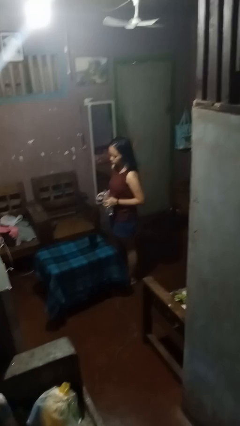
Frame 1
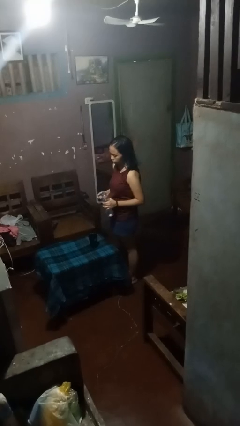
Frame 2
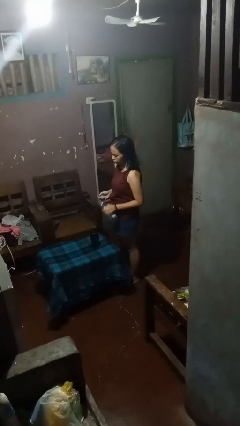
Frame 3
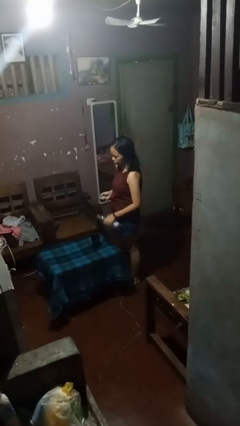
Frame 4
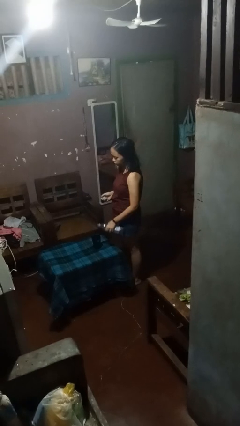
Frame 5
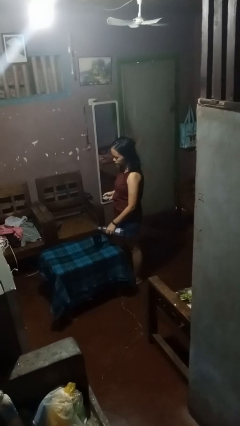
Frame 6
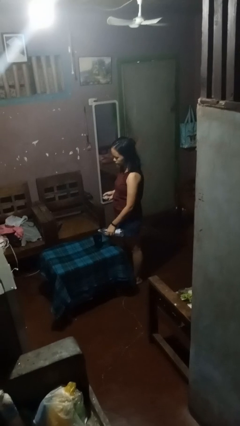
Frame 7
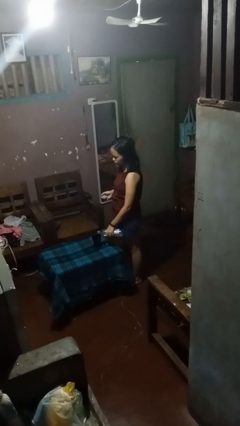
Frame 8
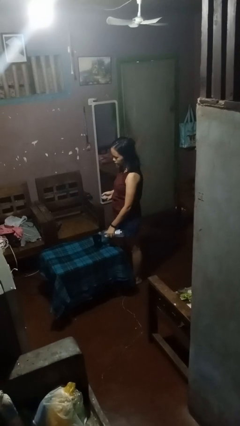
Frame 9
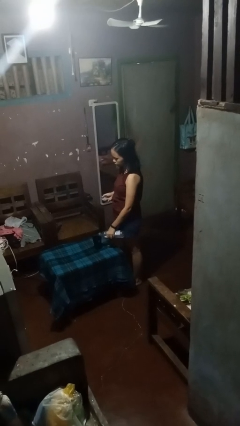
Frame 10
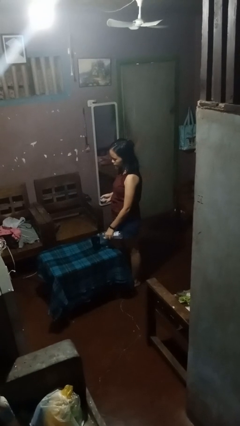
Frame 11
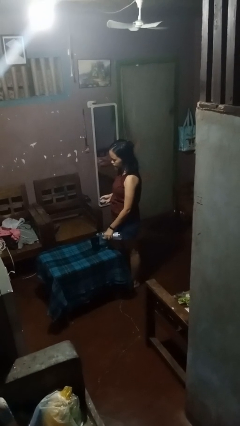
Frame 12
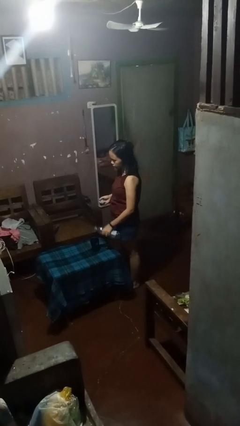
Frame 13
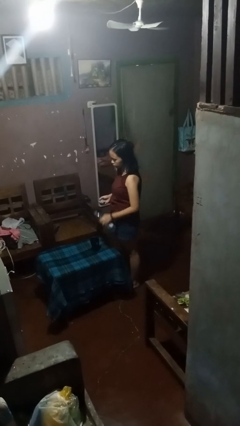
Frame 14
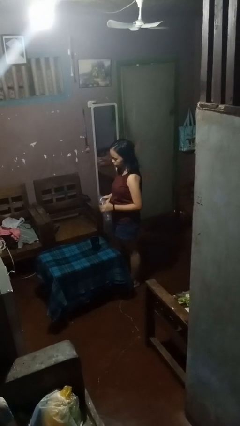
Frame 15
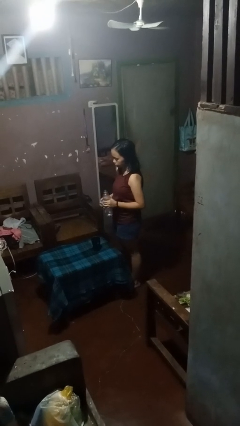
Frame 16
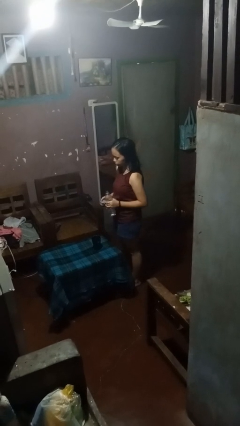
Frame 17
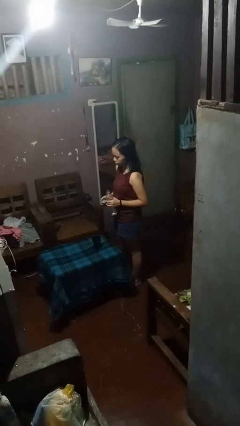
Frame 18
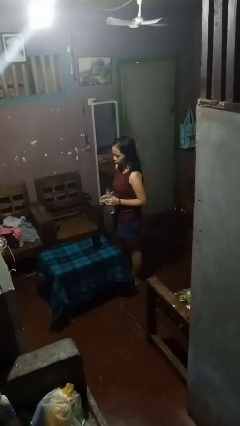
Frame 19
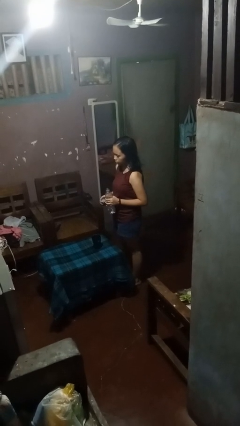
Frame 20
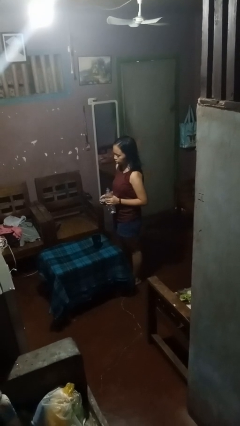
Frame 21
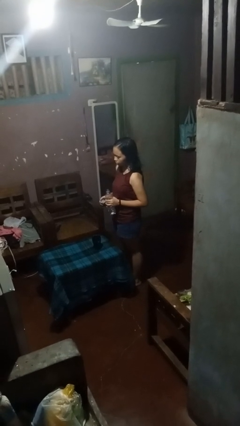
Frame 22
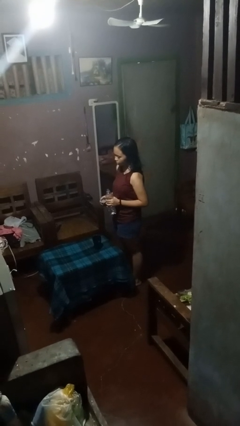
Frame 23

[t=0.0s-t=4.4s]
person pours liquid into cup

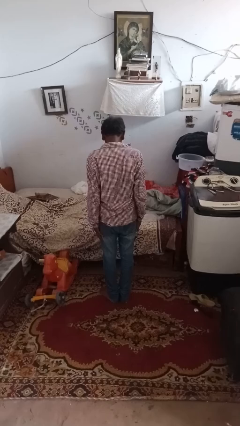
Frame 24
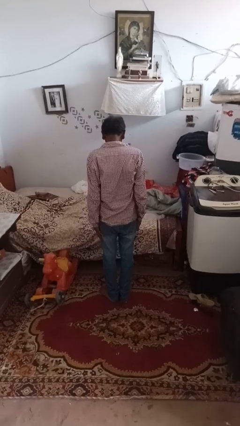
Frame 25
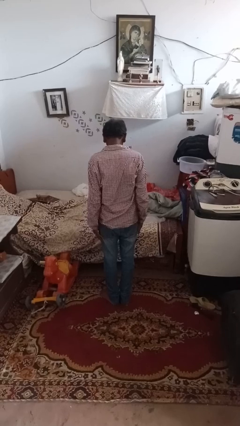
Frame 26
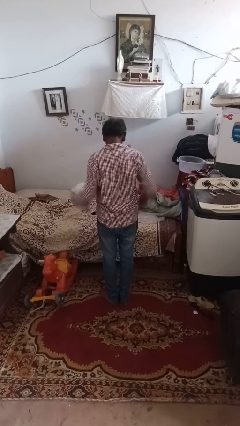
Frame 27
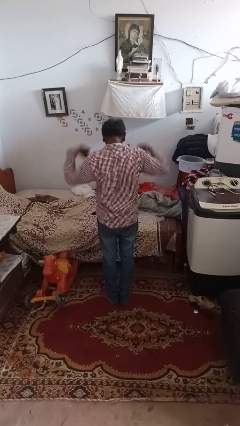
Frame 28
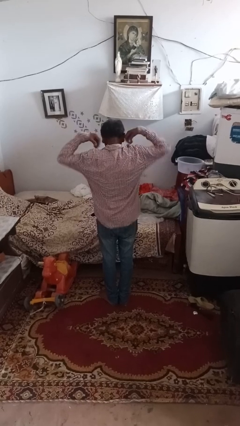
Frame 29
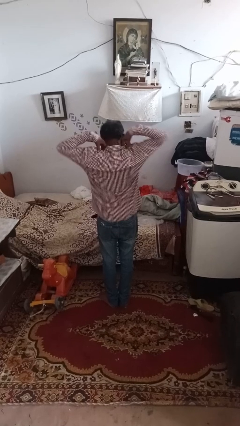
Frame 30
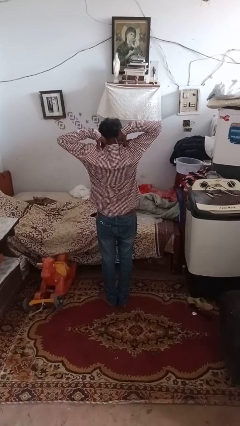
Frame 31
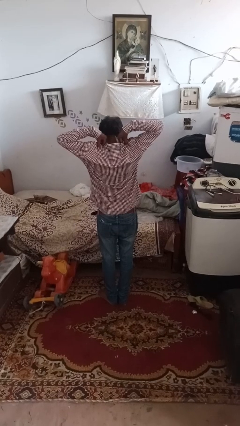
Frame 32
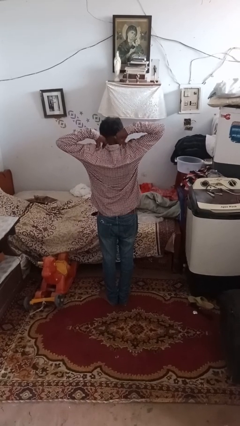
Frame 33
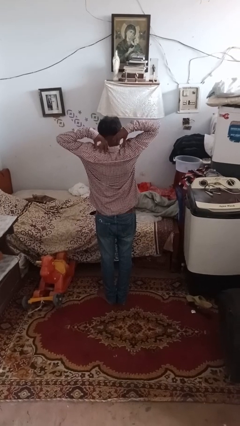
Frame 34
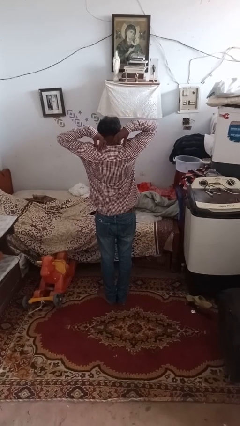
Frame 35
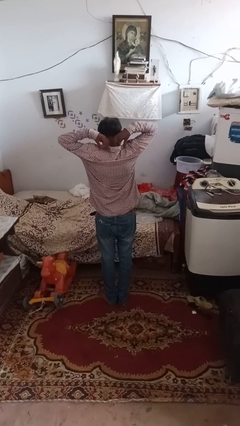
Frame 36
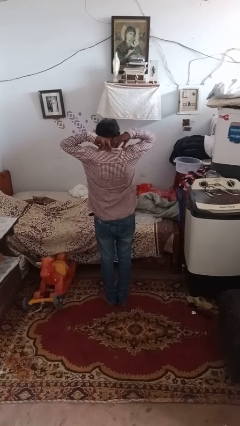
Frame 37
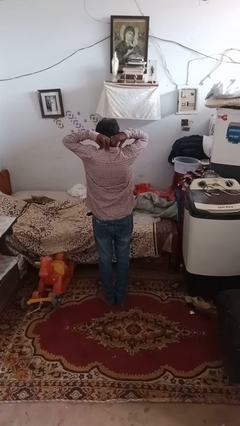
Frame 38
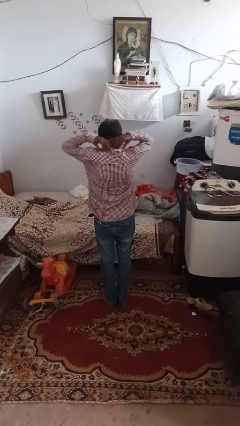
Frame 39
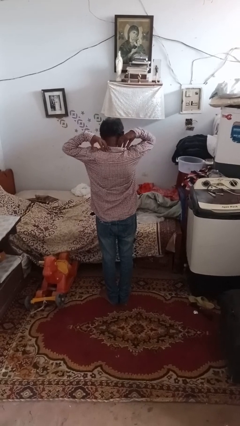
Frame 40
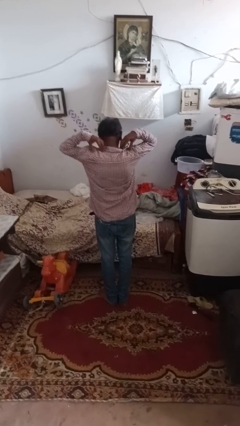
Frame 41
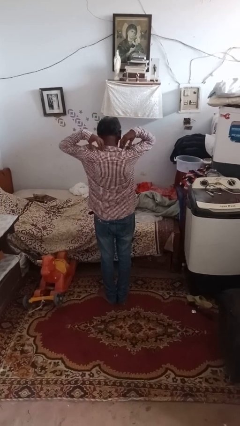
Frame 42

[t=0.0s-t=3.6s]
person sneezes into arm

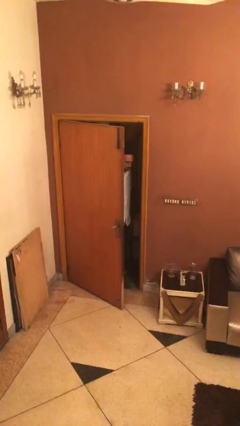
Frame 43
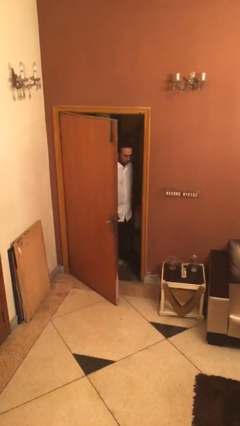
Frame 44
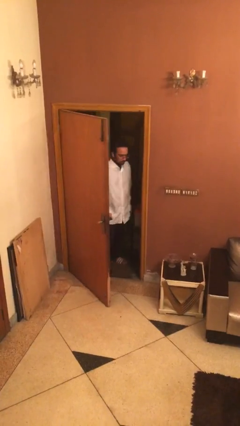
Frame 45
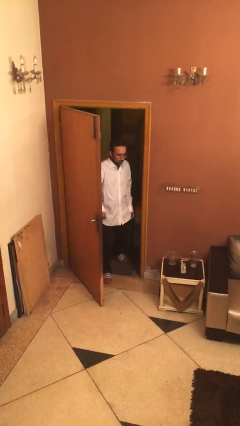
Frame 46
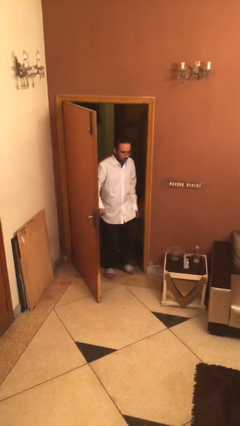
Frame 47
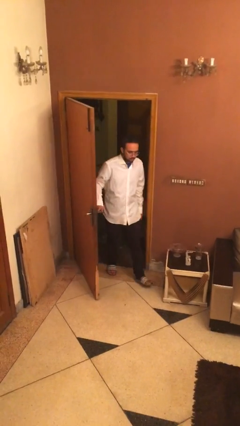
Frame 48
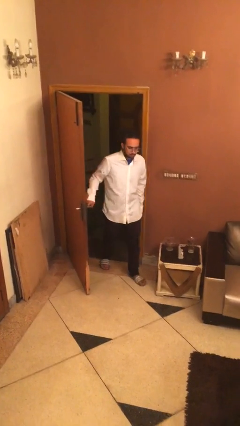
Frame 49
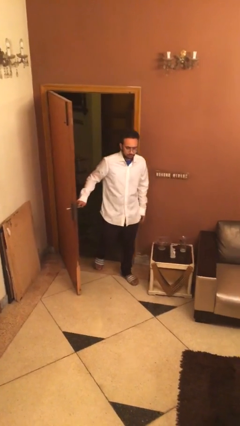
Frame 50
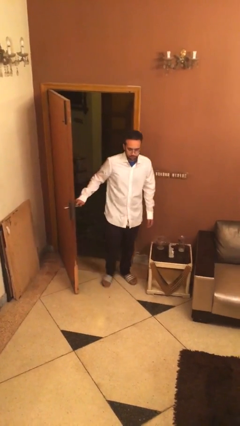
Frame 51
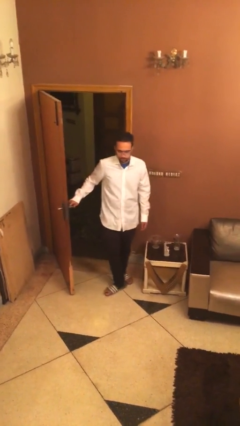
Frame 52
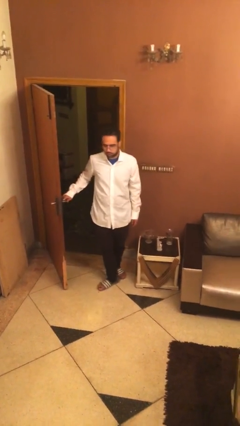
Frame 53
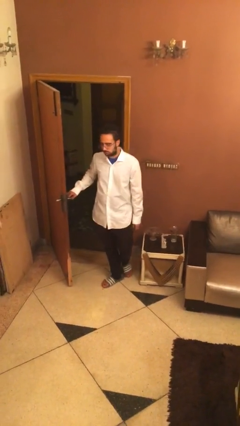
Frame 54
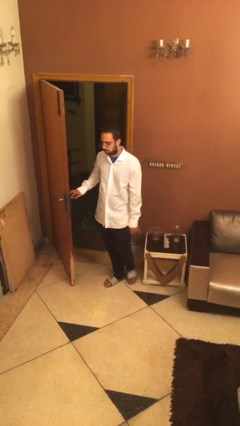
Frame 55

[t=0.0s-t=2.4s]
person enters scene through structure

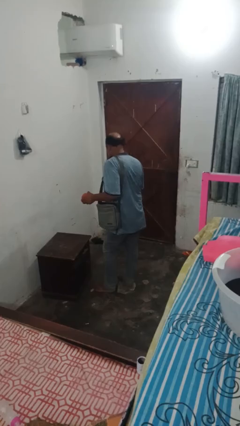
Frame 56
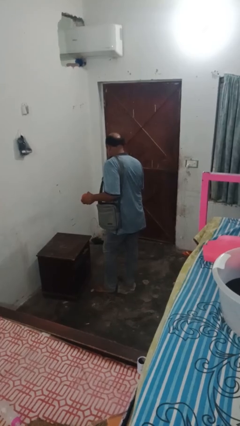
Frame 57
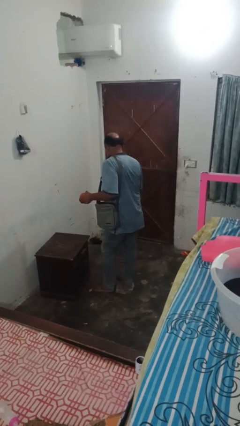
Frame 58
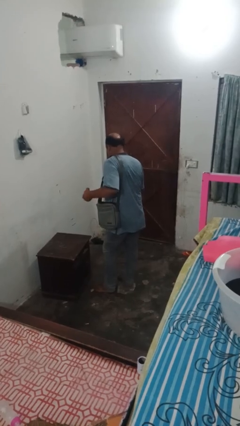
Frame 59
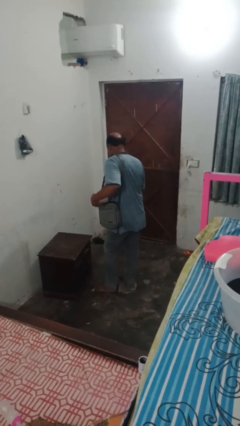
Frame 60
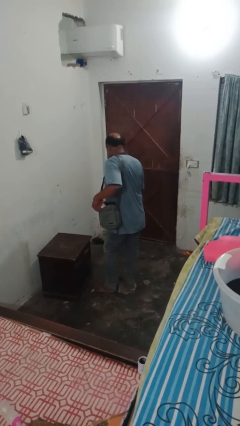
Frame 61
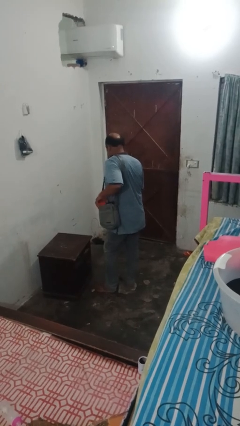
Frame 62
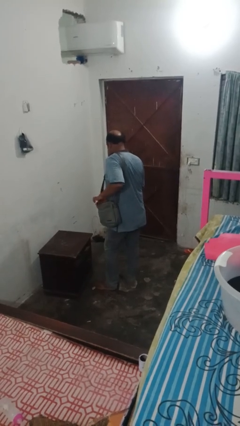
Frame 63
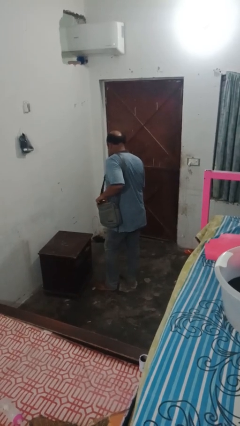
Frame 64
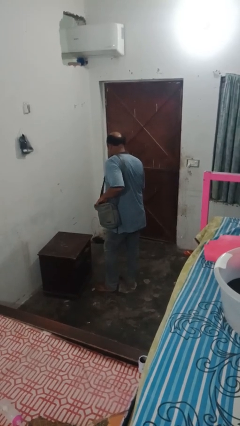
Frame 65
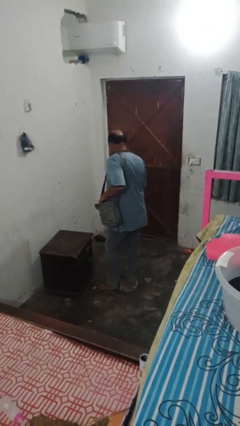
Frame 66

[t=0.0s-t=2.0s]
person puts object into bag

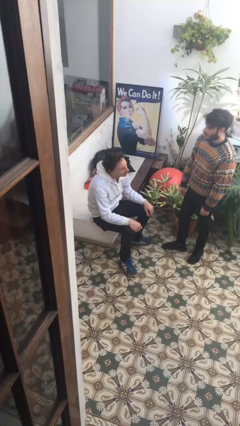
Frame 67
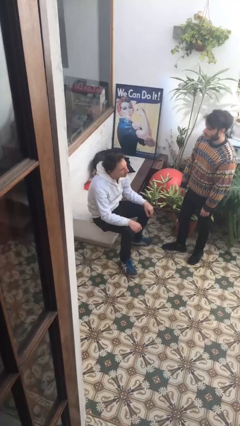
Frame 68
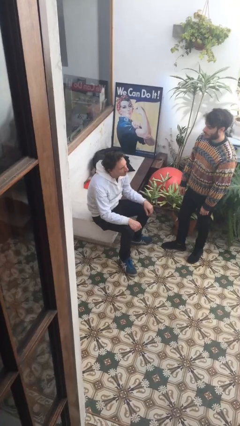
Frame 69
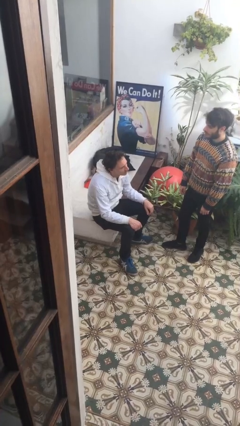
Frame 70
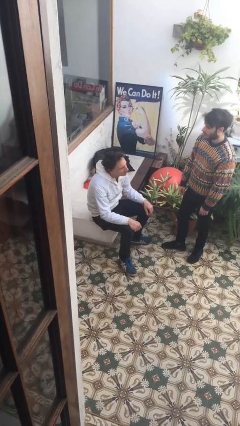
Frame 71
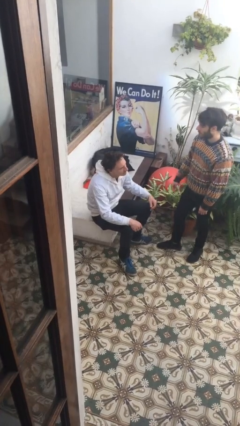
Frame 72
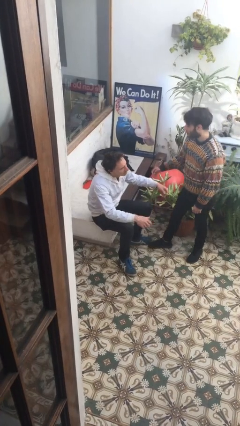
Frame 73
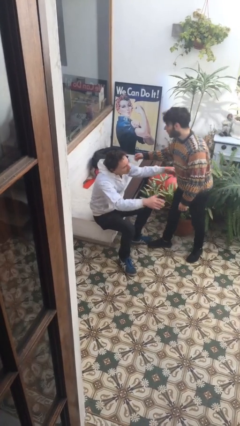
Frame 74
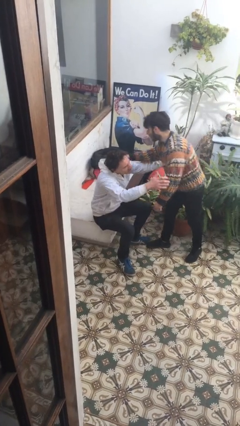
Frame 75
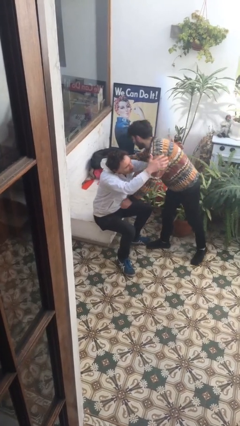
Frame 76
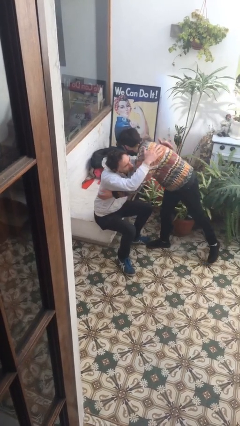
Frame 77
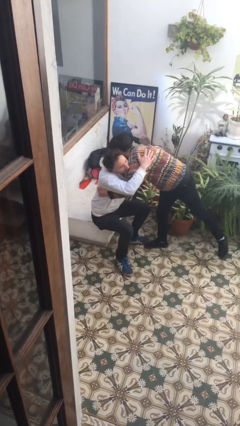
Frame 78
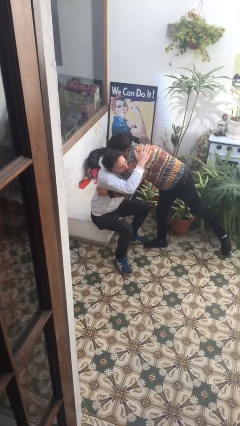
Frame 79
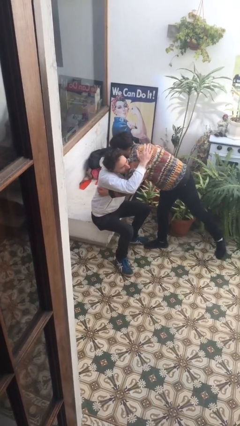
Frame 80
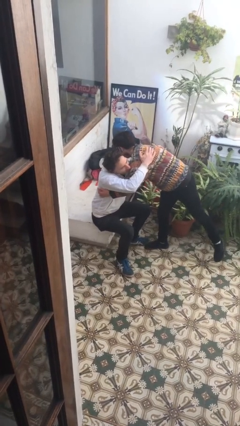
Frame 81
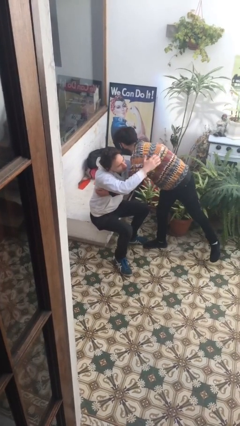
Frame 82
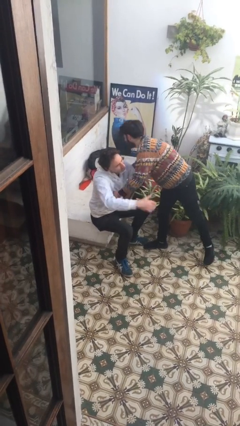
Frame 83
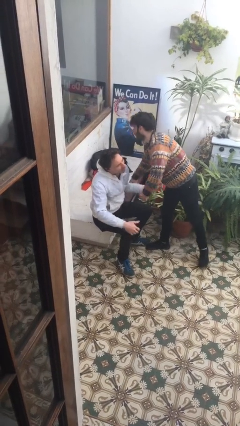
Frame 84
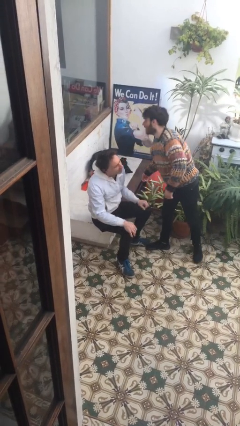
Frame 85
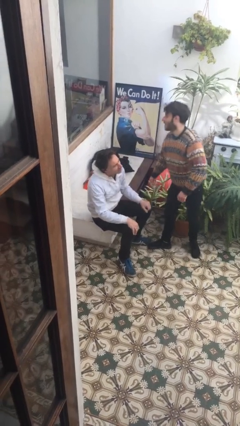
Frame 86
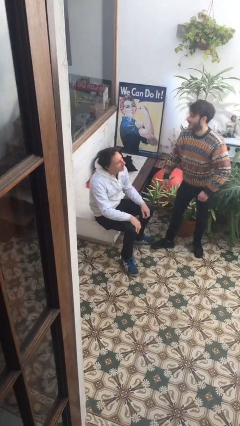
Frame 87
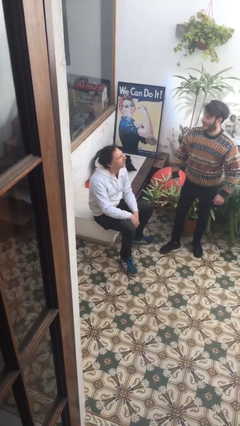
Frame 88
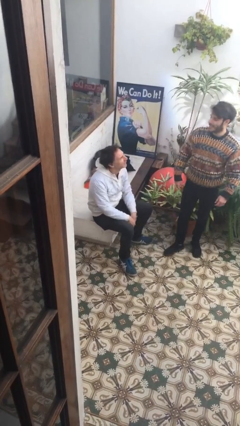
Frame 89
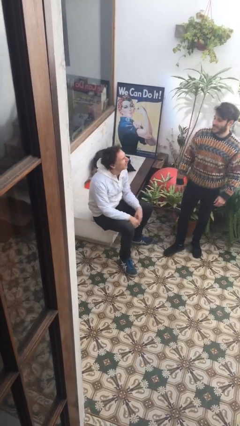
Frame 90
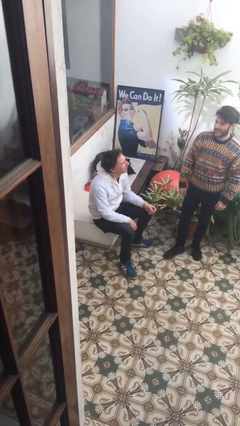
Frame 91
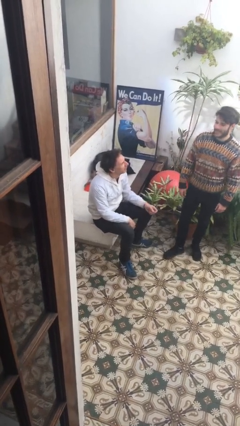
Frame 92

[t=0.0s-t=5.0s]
person embraces person
